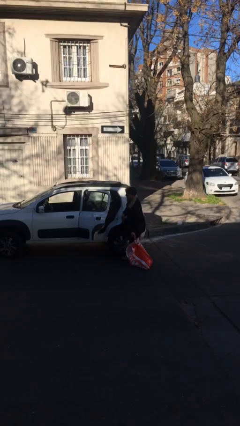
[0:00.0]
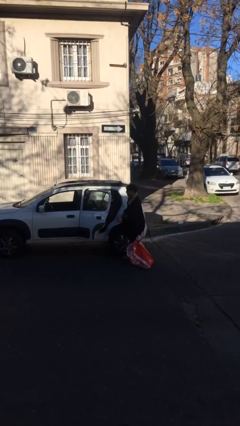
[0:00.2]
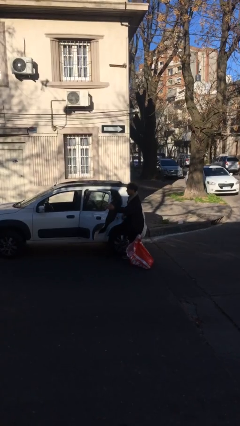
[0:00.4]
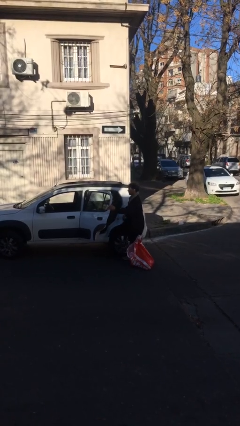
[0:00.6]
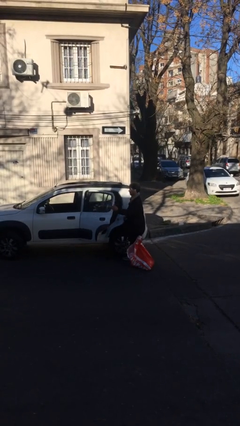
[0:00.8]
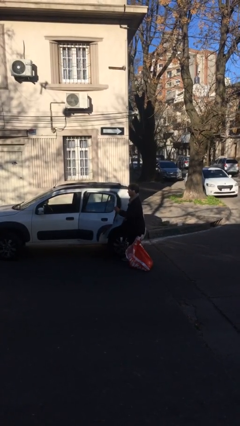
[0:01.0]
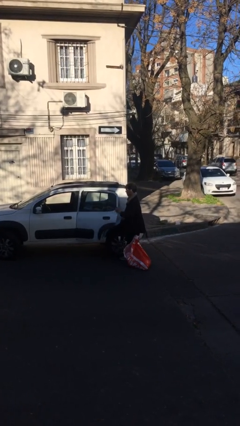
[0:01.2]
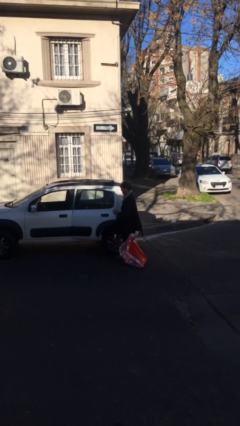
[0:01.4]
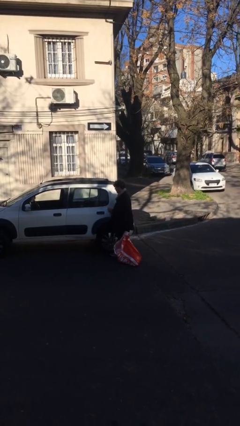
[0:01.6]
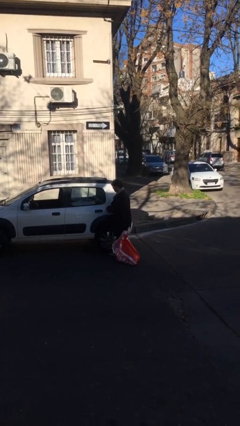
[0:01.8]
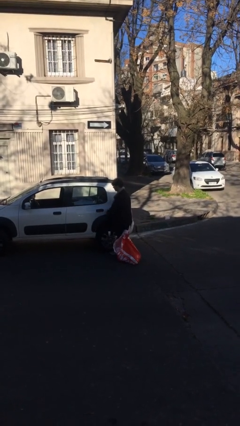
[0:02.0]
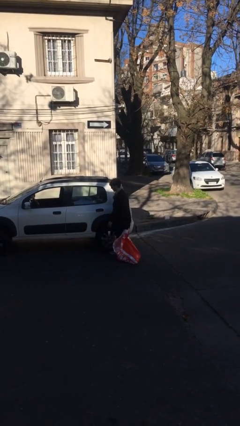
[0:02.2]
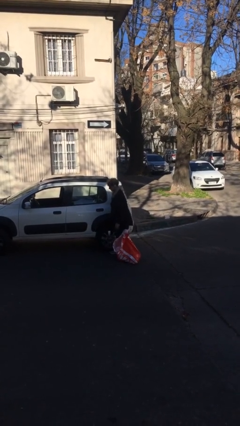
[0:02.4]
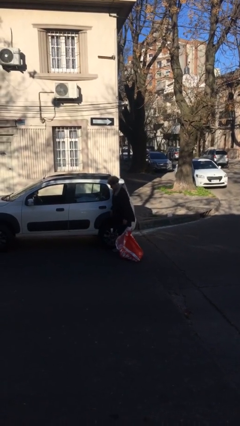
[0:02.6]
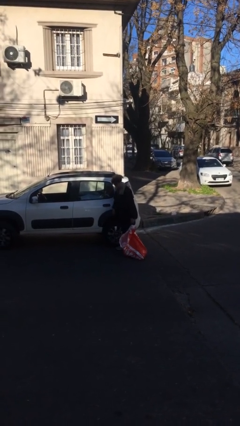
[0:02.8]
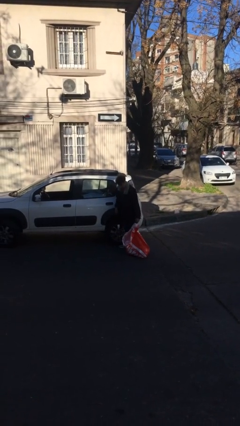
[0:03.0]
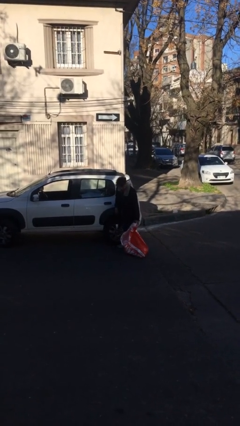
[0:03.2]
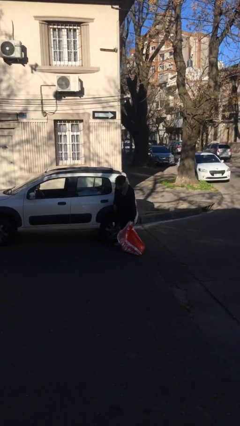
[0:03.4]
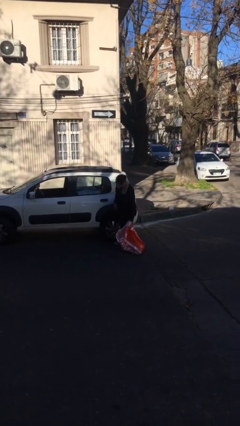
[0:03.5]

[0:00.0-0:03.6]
person closes car door

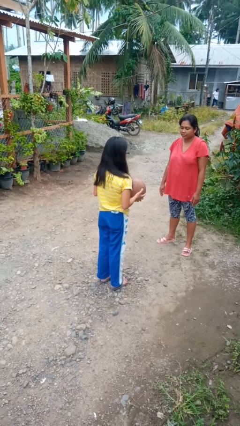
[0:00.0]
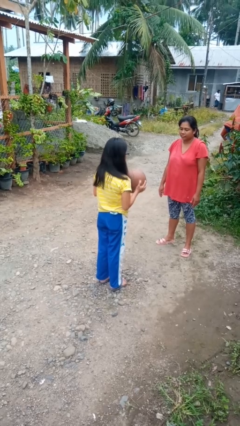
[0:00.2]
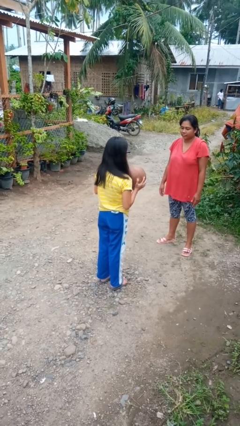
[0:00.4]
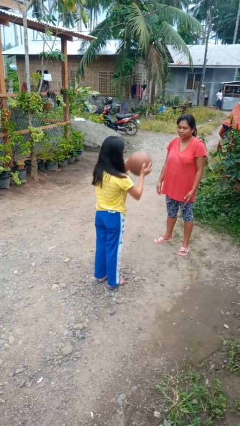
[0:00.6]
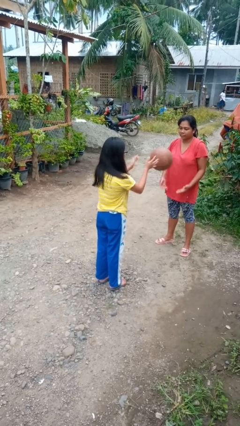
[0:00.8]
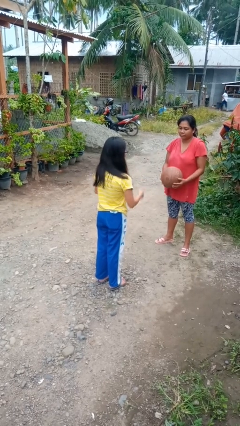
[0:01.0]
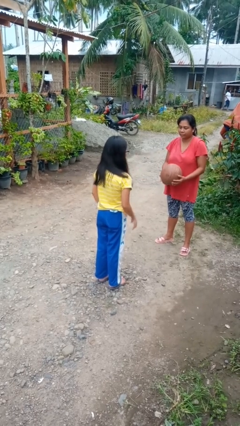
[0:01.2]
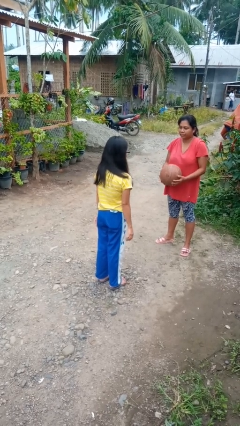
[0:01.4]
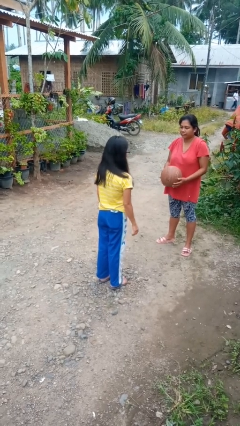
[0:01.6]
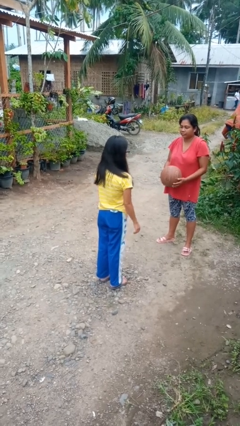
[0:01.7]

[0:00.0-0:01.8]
person throws object to person

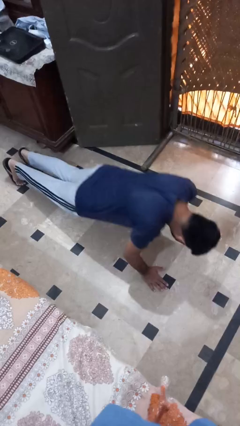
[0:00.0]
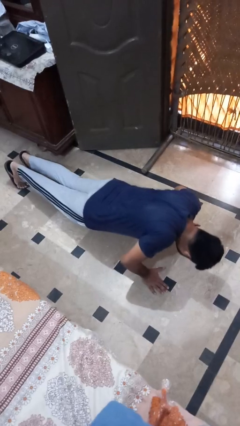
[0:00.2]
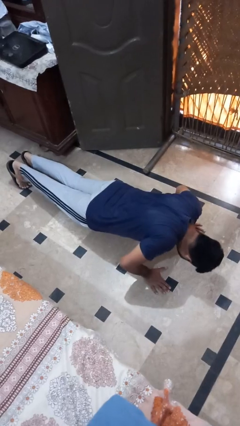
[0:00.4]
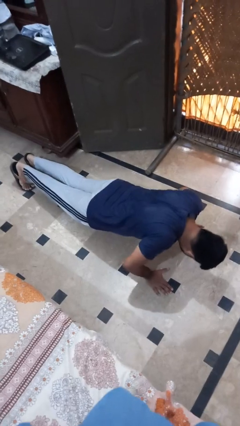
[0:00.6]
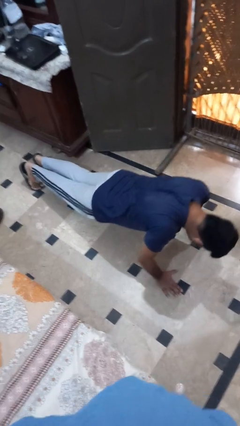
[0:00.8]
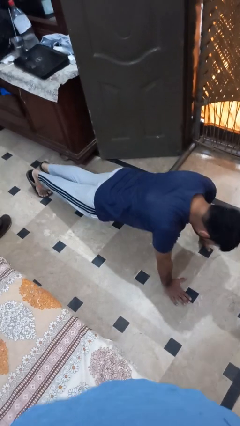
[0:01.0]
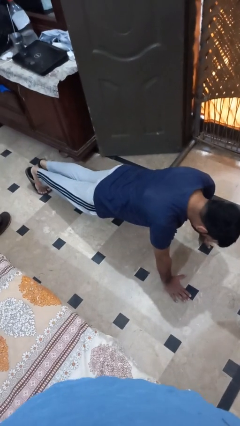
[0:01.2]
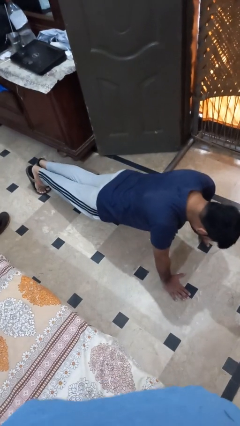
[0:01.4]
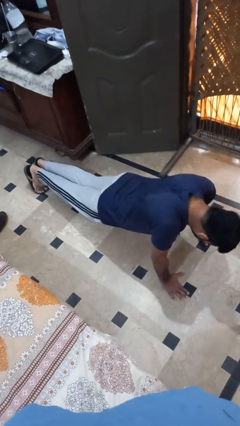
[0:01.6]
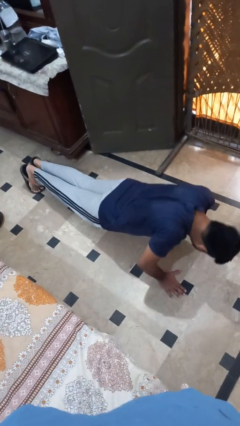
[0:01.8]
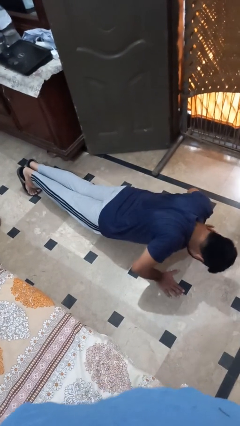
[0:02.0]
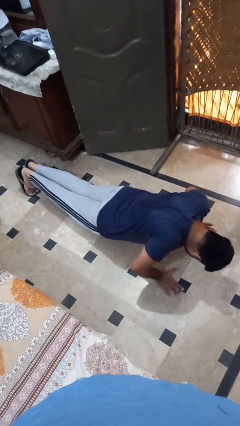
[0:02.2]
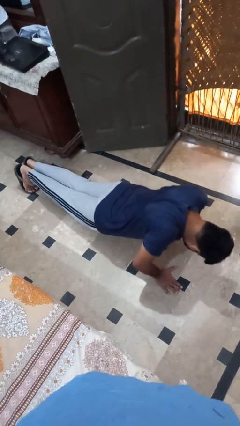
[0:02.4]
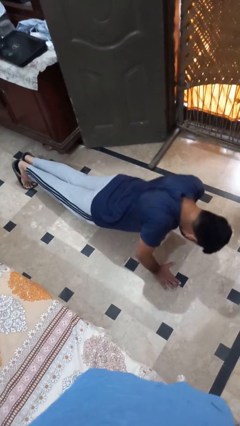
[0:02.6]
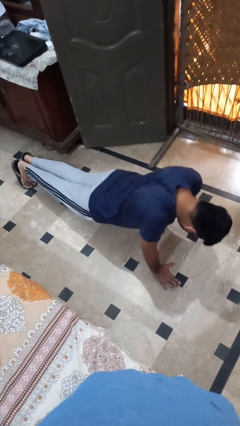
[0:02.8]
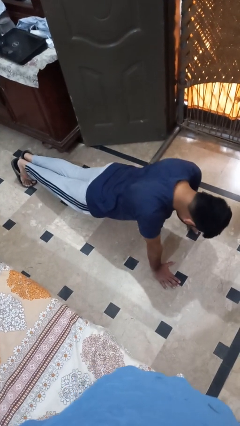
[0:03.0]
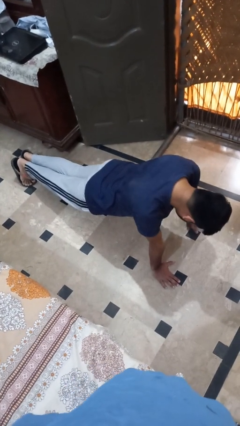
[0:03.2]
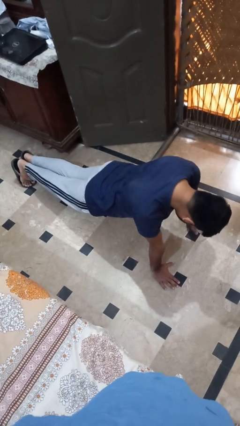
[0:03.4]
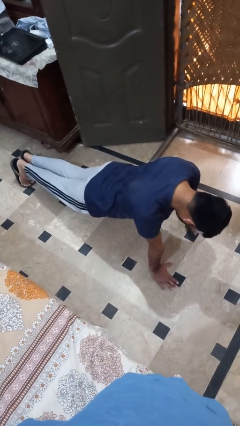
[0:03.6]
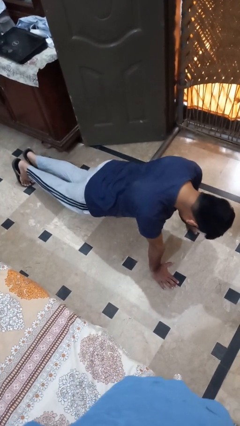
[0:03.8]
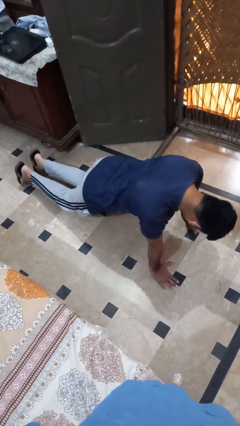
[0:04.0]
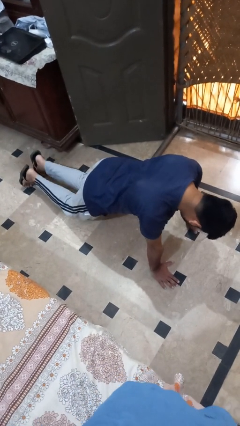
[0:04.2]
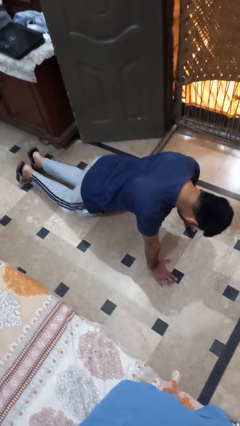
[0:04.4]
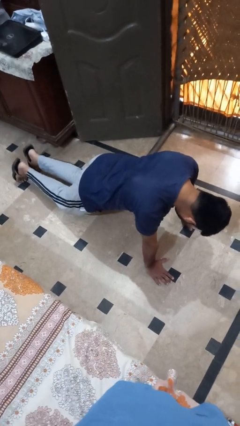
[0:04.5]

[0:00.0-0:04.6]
person exercises with pushup

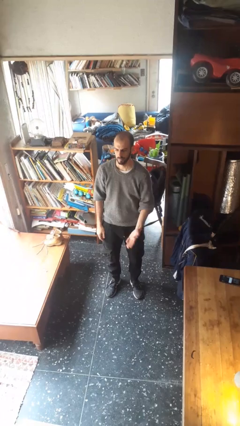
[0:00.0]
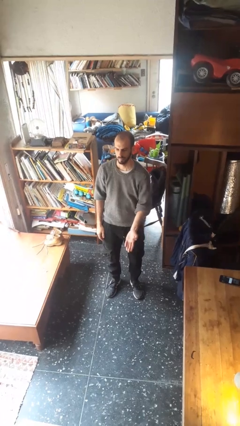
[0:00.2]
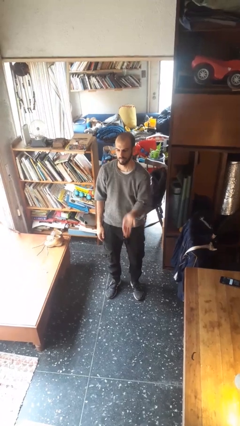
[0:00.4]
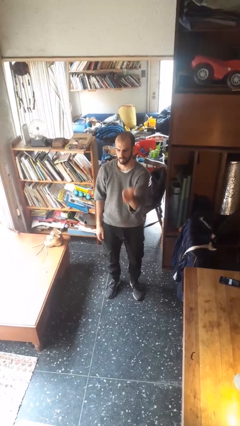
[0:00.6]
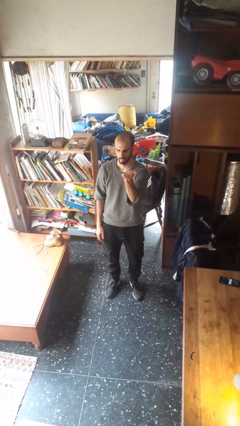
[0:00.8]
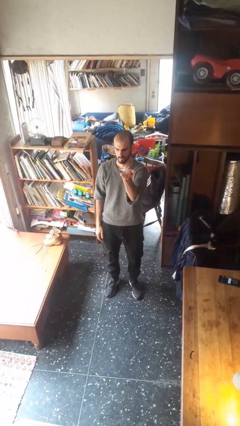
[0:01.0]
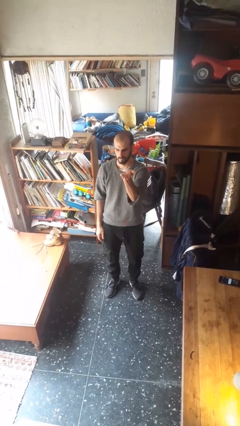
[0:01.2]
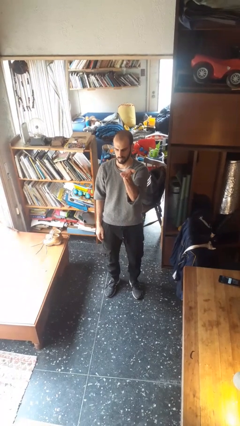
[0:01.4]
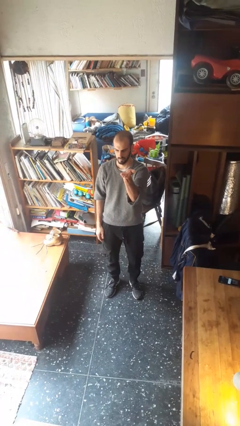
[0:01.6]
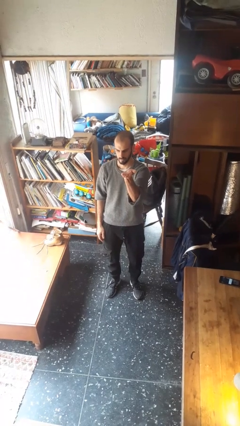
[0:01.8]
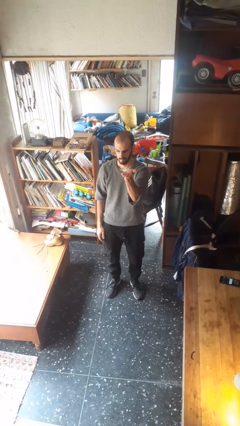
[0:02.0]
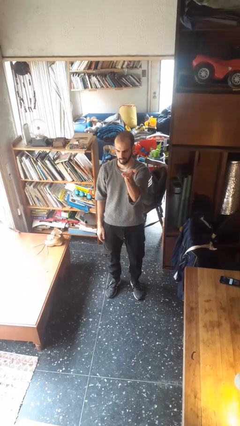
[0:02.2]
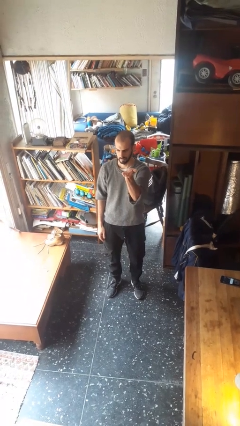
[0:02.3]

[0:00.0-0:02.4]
person gestures swipe up

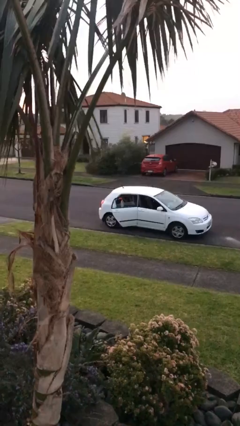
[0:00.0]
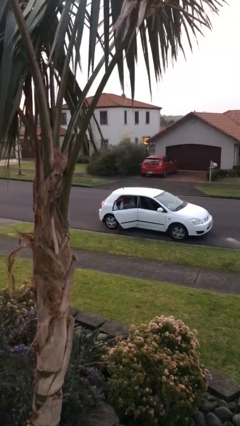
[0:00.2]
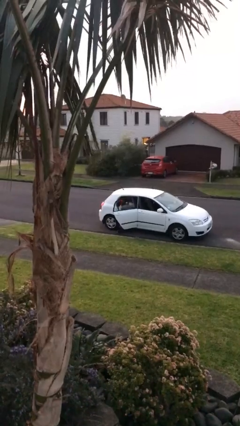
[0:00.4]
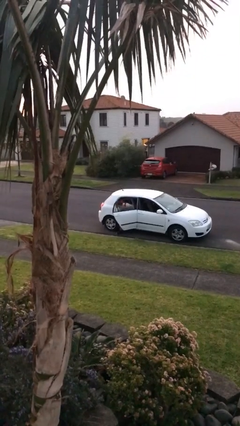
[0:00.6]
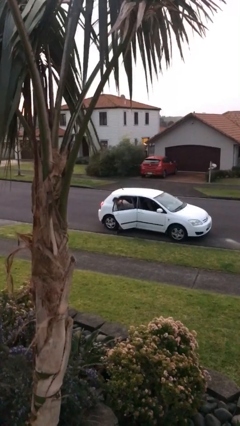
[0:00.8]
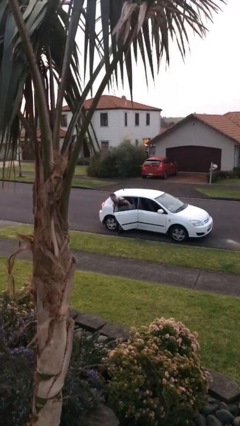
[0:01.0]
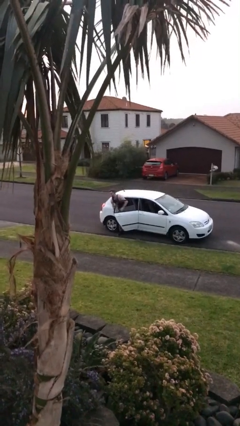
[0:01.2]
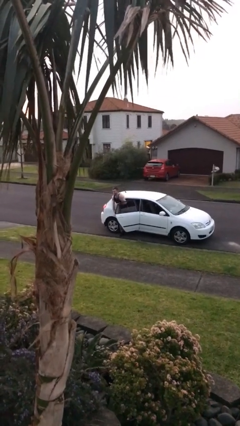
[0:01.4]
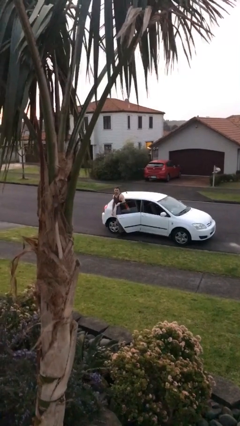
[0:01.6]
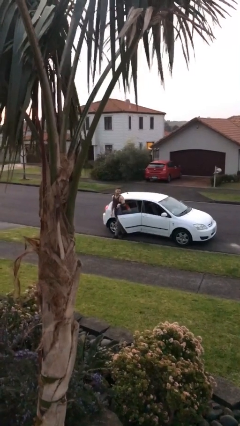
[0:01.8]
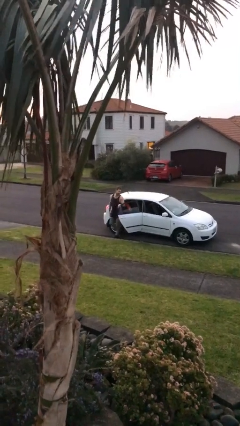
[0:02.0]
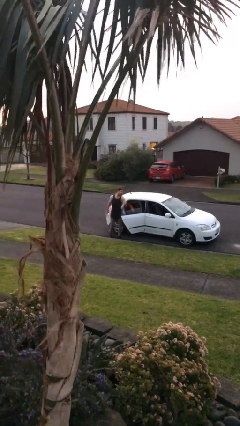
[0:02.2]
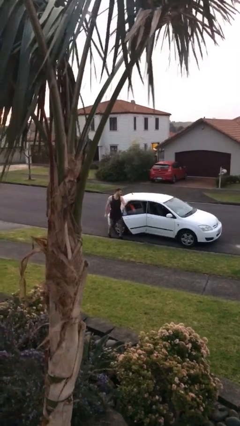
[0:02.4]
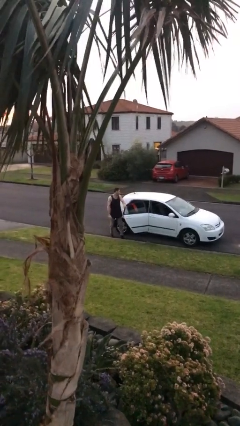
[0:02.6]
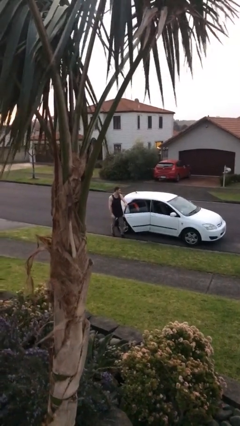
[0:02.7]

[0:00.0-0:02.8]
person exits car

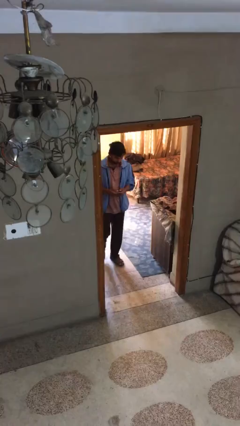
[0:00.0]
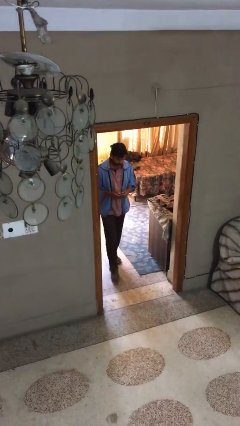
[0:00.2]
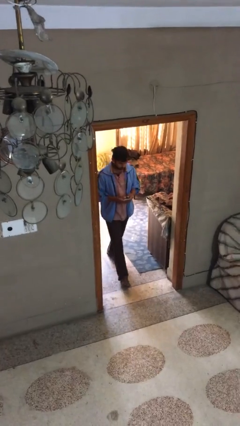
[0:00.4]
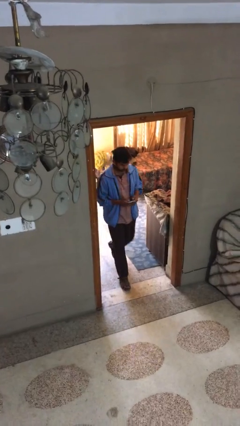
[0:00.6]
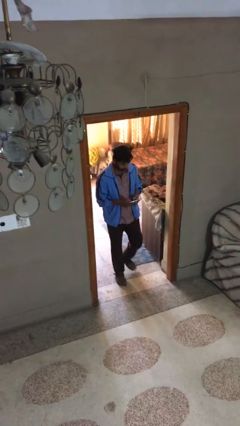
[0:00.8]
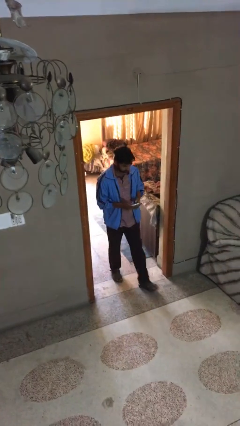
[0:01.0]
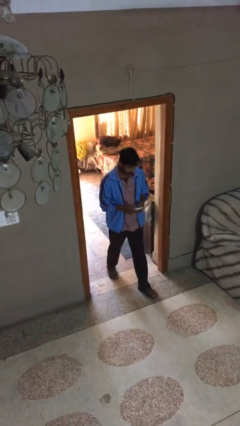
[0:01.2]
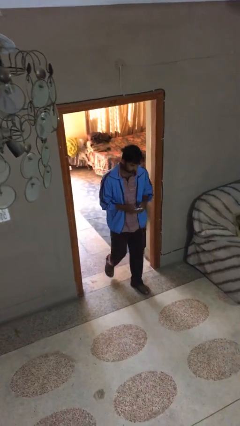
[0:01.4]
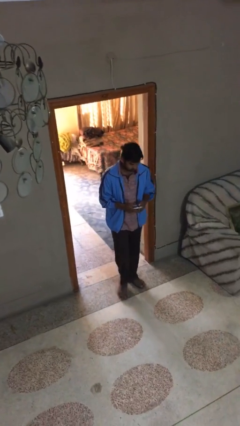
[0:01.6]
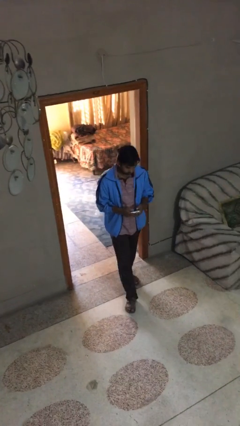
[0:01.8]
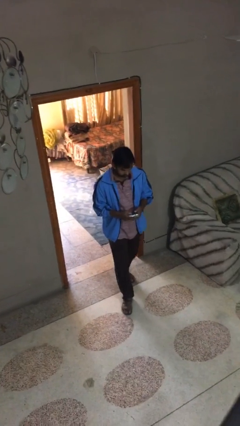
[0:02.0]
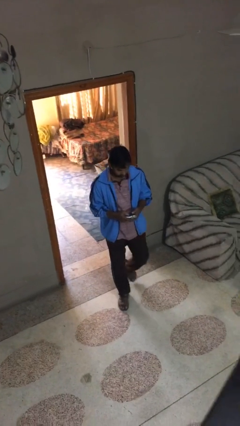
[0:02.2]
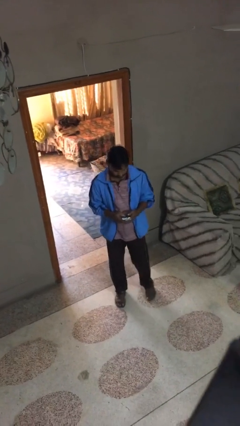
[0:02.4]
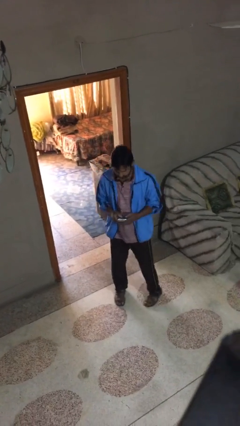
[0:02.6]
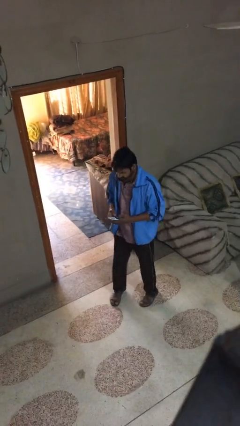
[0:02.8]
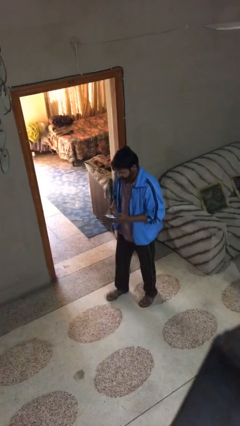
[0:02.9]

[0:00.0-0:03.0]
person enters scene through structure
